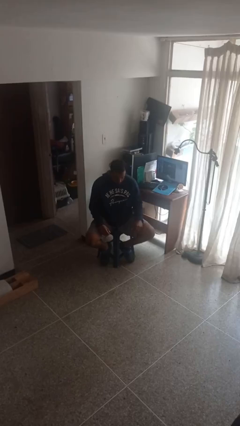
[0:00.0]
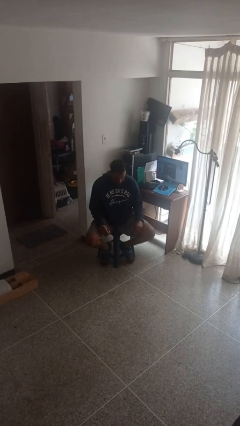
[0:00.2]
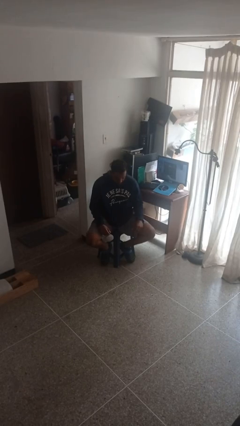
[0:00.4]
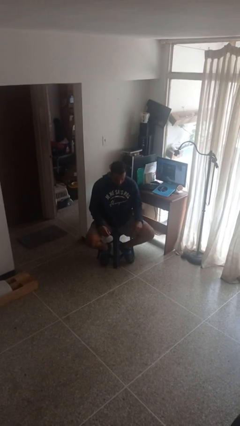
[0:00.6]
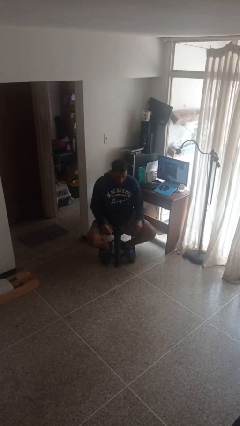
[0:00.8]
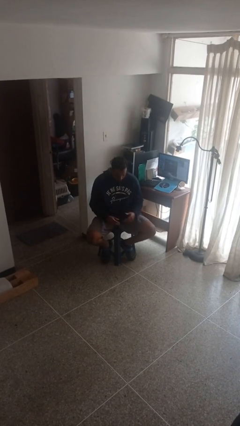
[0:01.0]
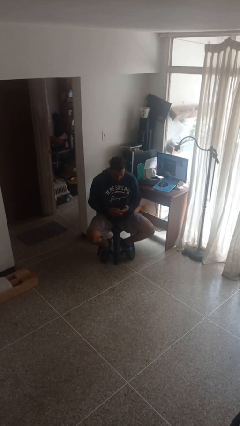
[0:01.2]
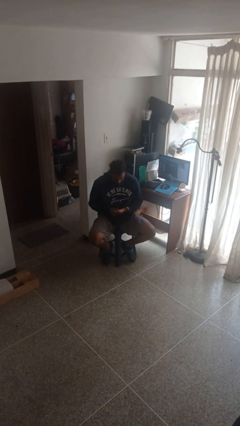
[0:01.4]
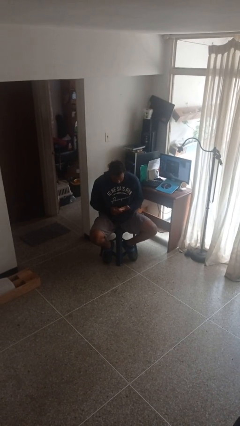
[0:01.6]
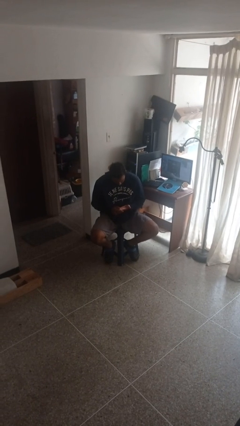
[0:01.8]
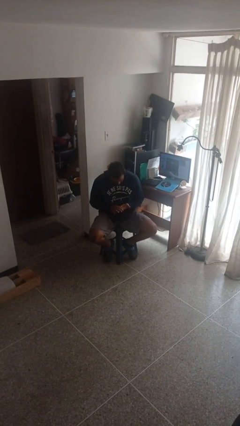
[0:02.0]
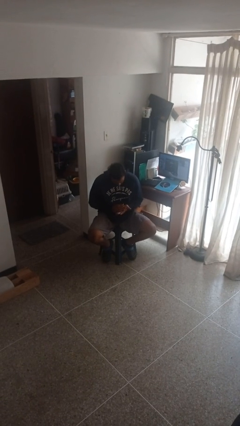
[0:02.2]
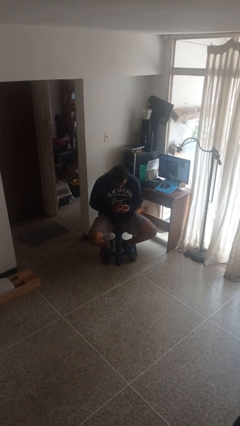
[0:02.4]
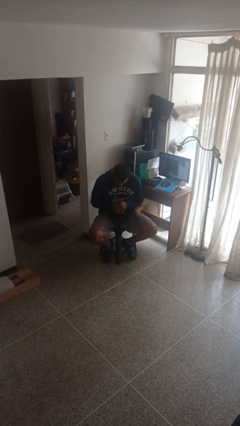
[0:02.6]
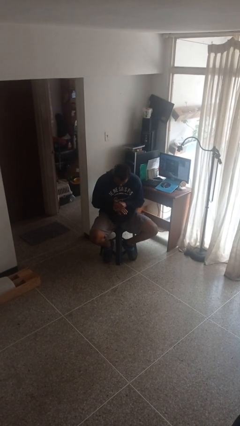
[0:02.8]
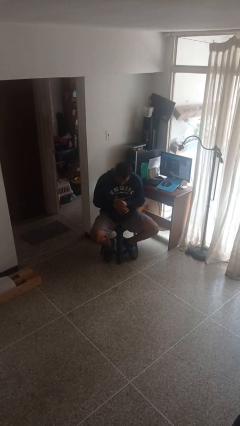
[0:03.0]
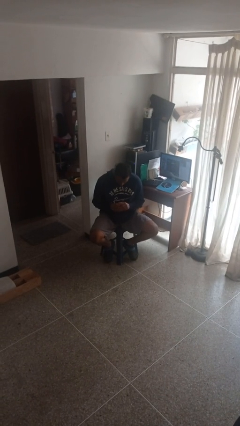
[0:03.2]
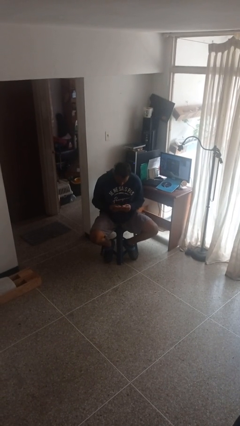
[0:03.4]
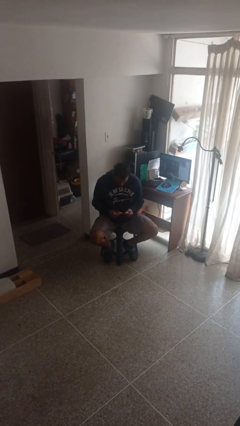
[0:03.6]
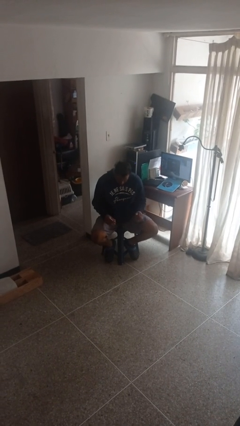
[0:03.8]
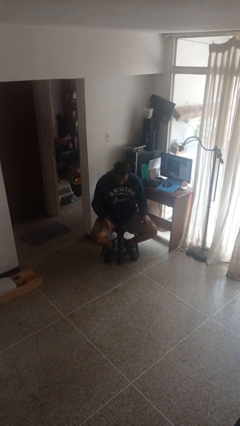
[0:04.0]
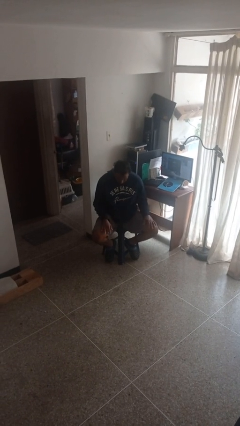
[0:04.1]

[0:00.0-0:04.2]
person looks at hands in lap

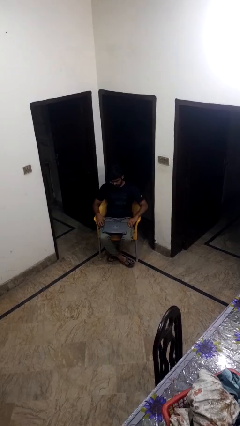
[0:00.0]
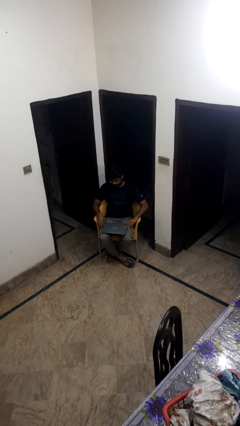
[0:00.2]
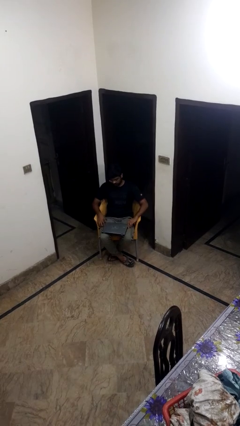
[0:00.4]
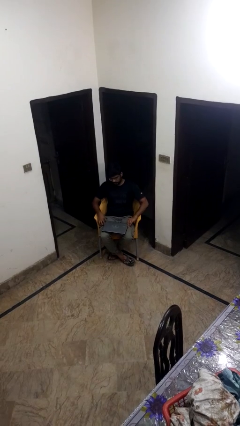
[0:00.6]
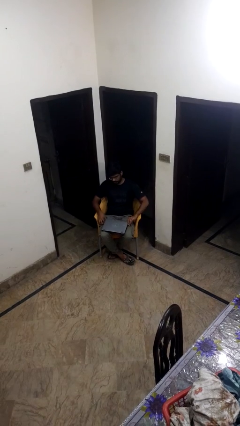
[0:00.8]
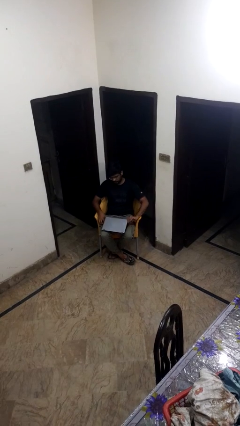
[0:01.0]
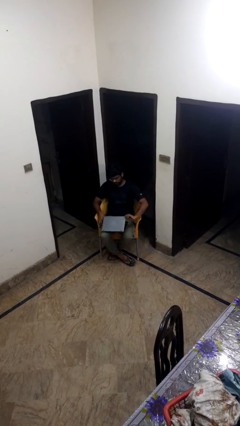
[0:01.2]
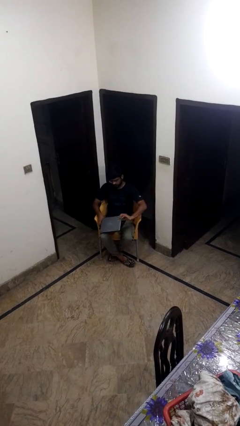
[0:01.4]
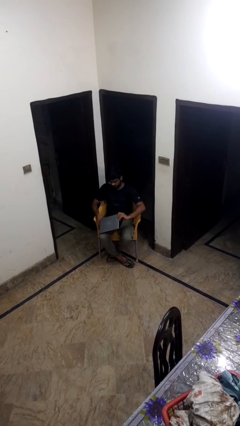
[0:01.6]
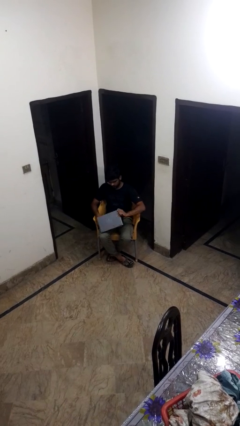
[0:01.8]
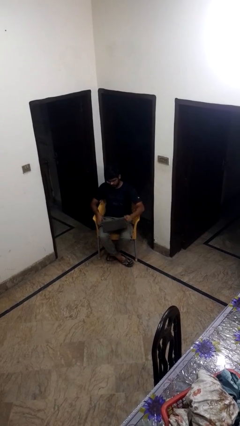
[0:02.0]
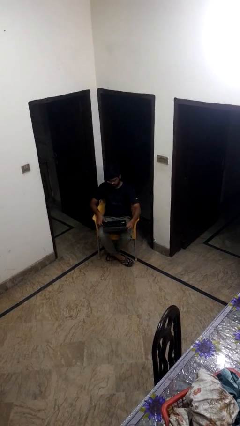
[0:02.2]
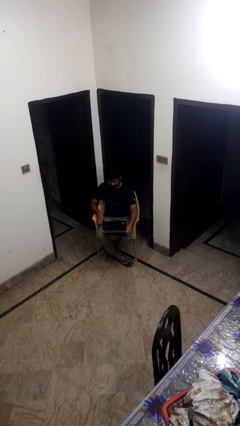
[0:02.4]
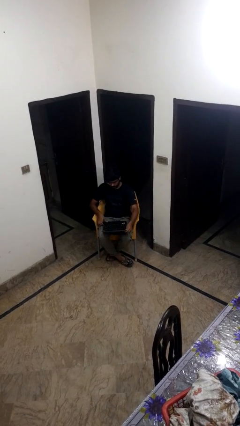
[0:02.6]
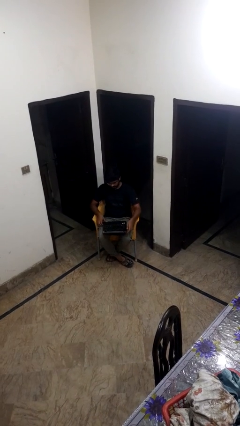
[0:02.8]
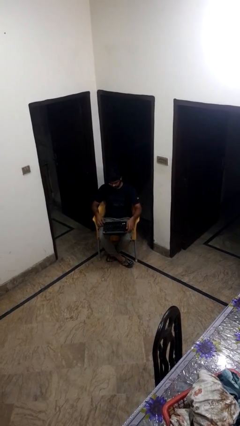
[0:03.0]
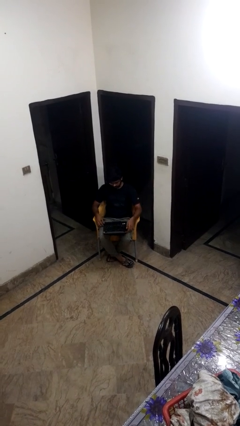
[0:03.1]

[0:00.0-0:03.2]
person opens laptop

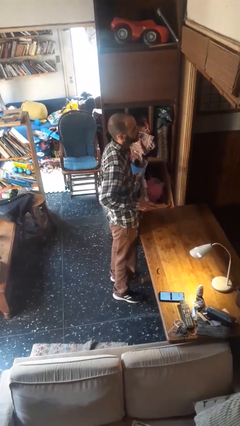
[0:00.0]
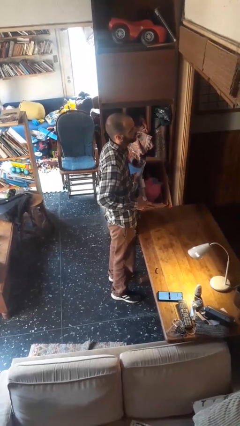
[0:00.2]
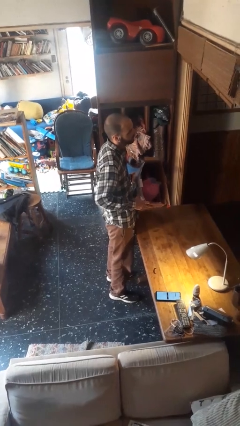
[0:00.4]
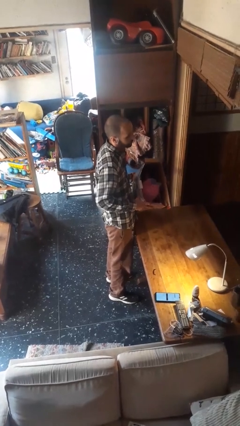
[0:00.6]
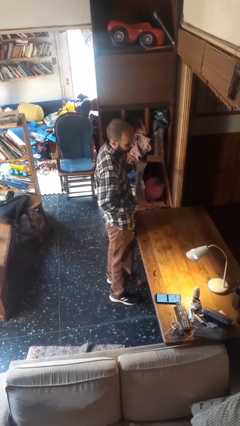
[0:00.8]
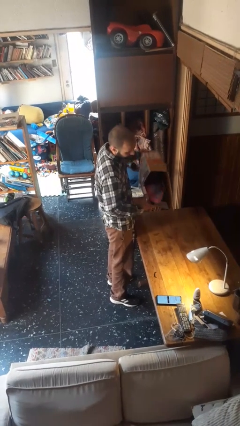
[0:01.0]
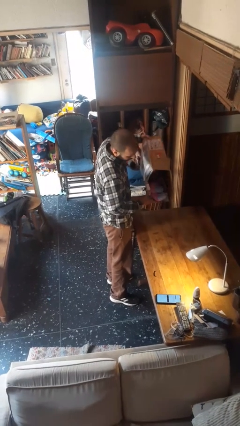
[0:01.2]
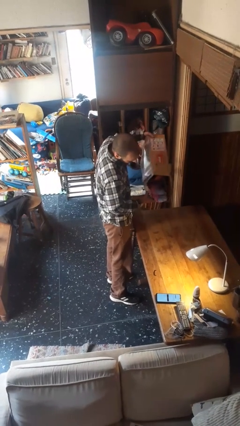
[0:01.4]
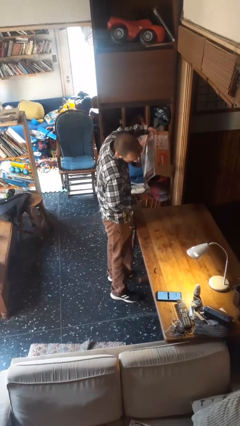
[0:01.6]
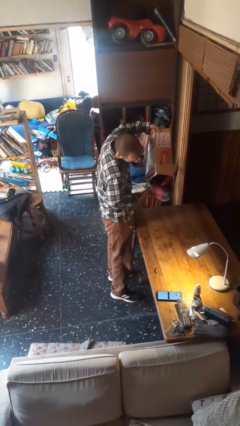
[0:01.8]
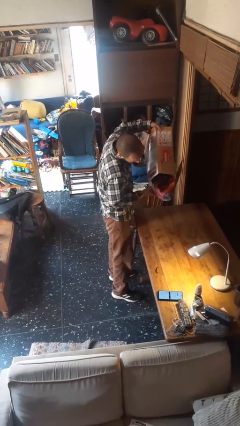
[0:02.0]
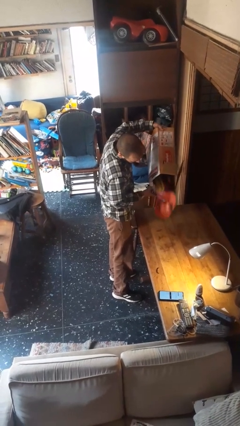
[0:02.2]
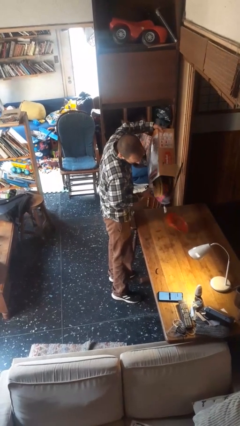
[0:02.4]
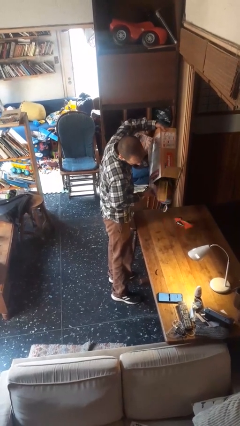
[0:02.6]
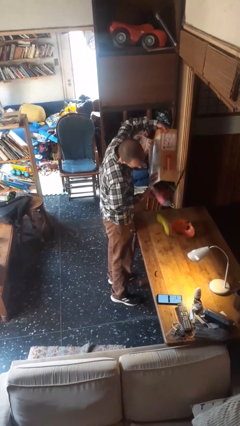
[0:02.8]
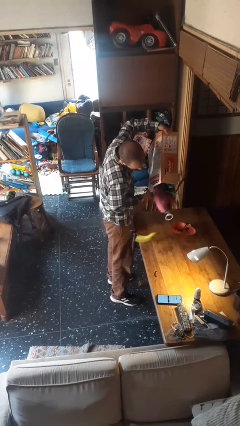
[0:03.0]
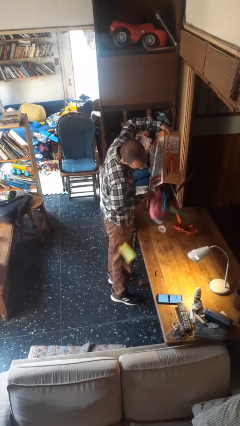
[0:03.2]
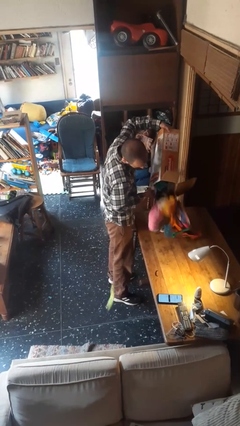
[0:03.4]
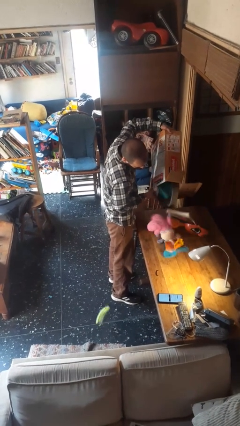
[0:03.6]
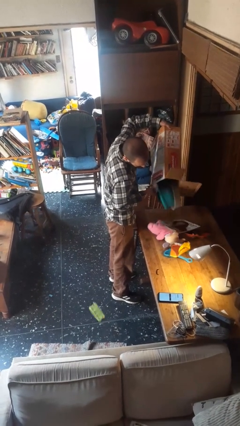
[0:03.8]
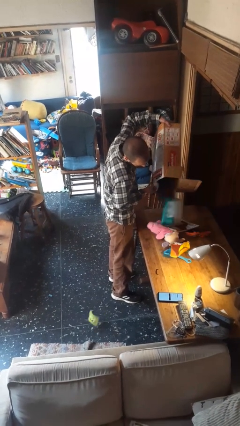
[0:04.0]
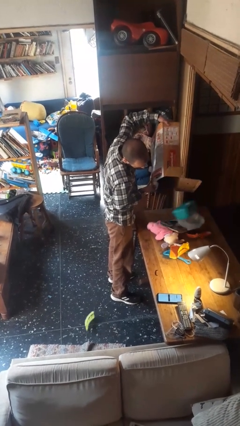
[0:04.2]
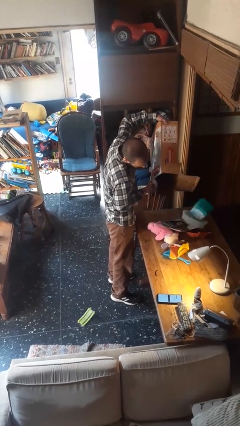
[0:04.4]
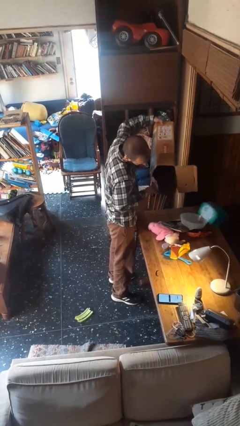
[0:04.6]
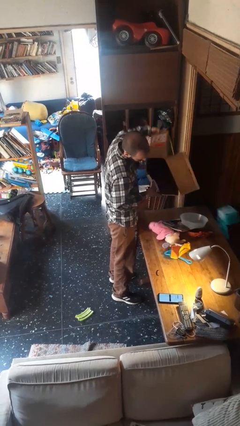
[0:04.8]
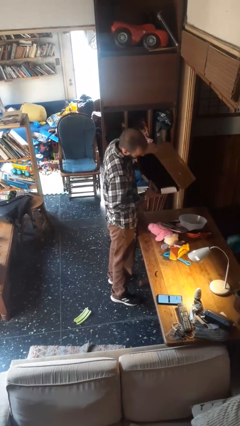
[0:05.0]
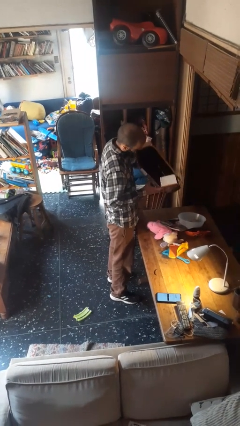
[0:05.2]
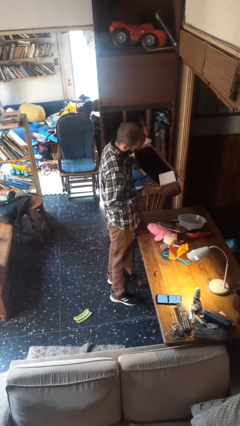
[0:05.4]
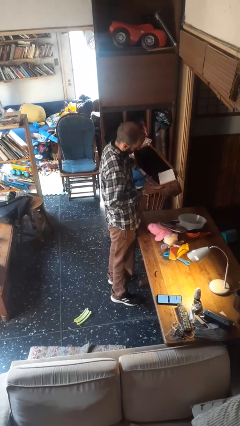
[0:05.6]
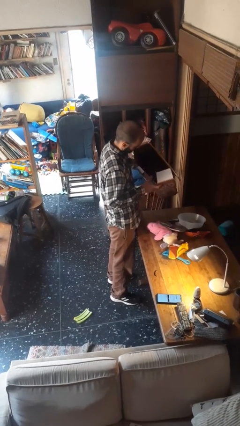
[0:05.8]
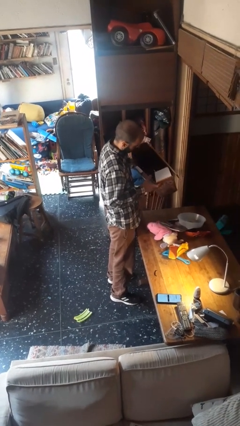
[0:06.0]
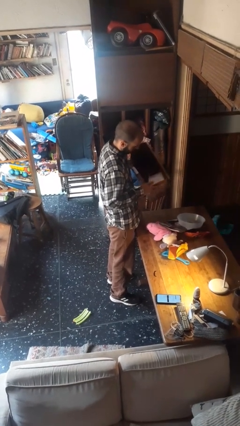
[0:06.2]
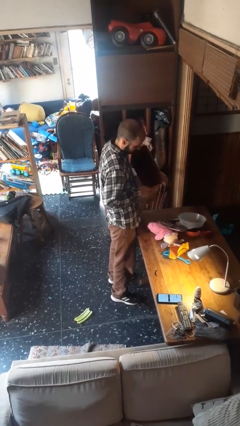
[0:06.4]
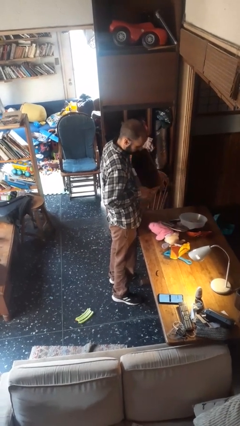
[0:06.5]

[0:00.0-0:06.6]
person unloads box onto table

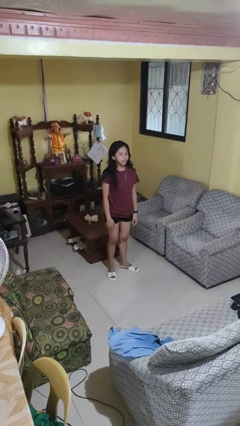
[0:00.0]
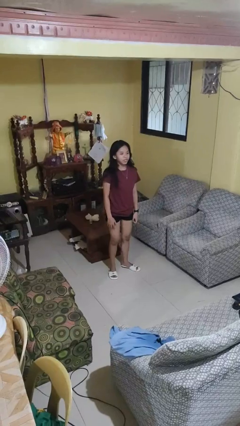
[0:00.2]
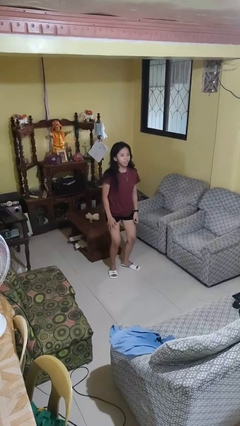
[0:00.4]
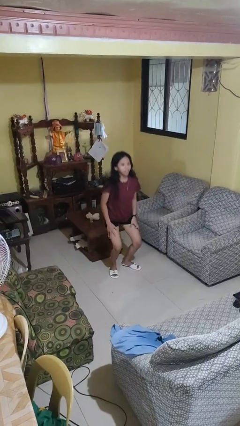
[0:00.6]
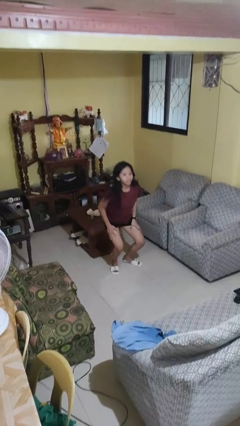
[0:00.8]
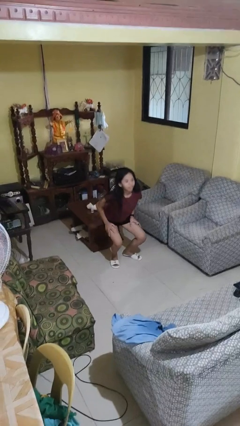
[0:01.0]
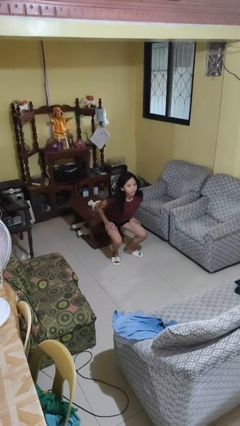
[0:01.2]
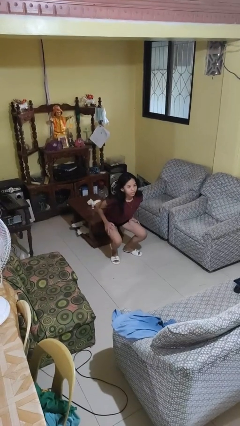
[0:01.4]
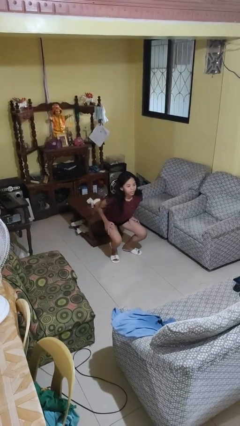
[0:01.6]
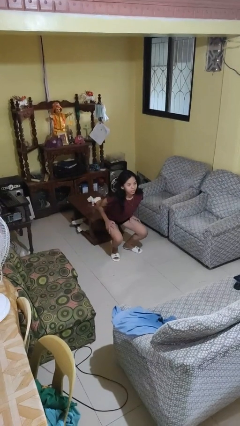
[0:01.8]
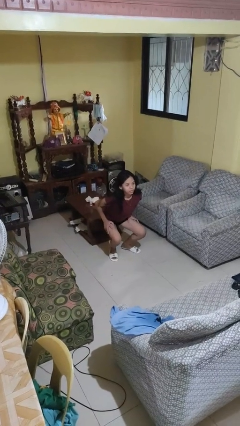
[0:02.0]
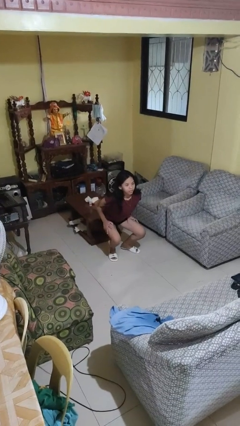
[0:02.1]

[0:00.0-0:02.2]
person squats

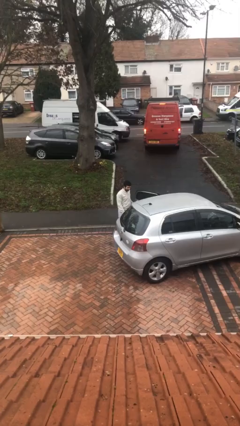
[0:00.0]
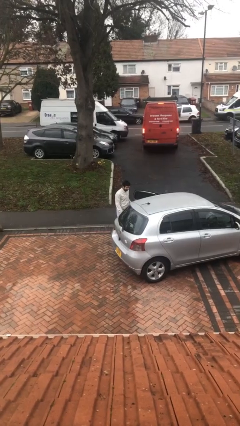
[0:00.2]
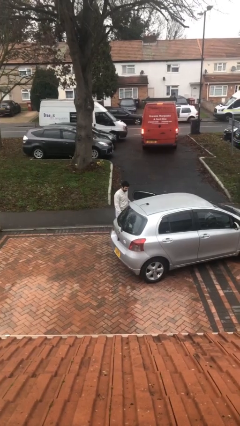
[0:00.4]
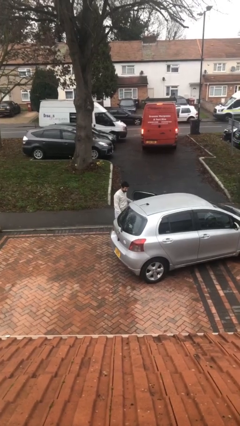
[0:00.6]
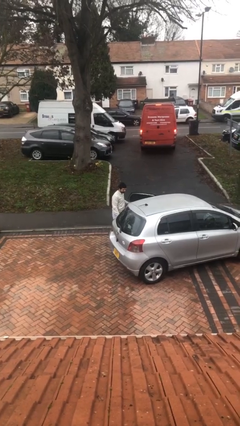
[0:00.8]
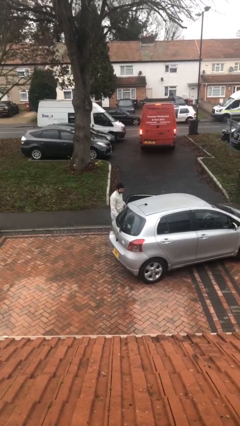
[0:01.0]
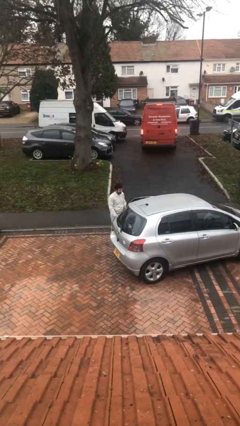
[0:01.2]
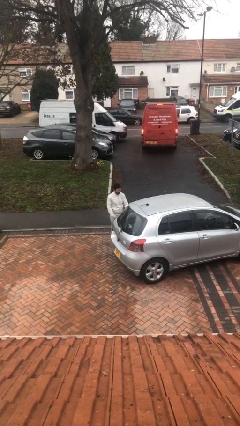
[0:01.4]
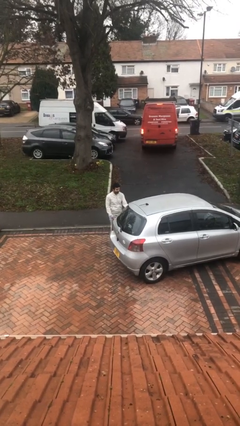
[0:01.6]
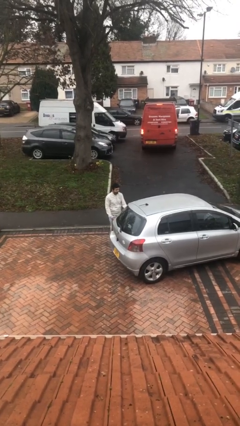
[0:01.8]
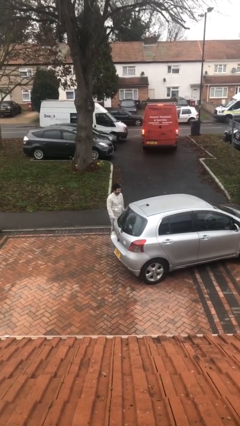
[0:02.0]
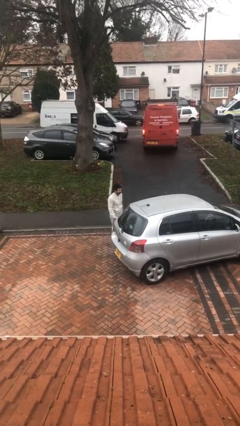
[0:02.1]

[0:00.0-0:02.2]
person closes car door
